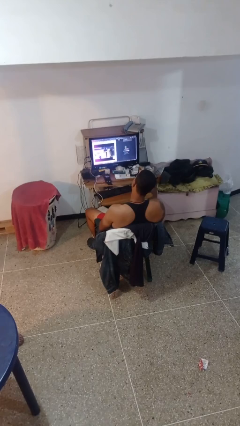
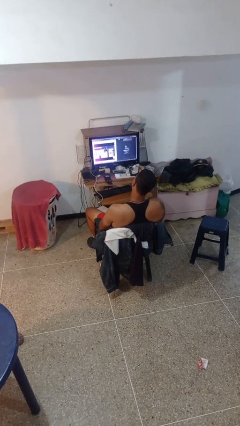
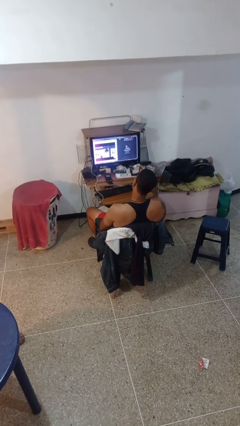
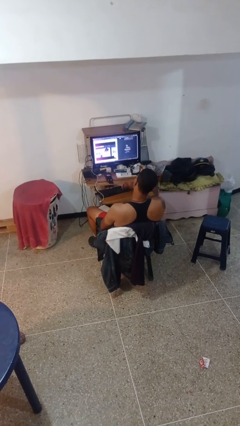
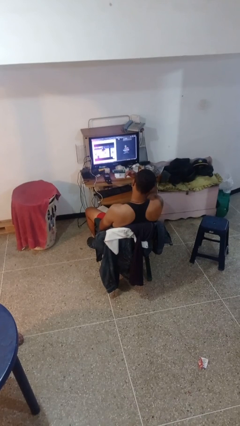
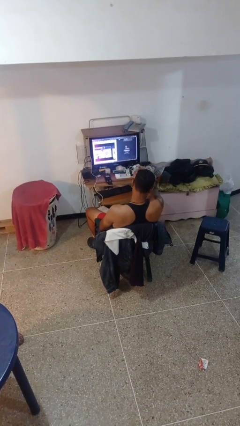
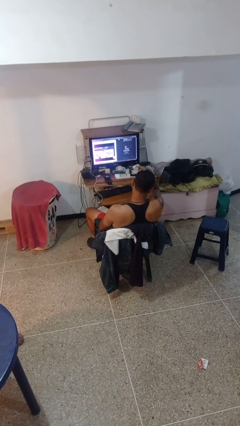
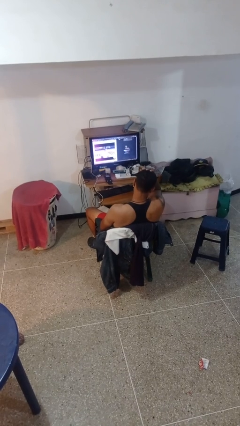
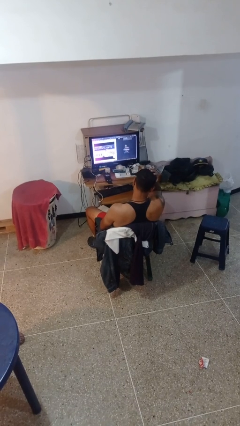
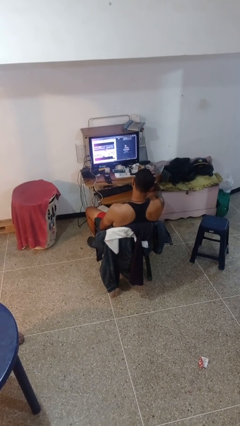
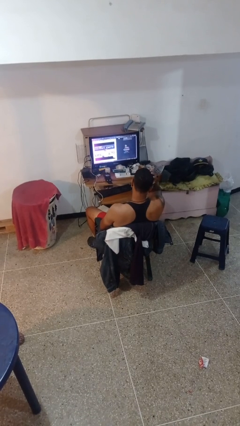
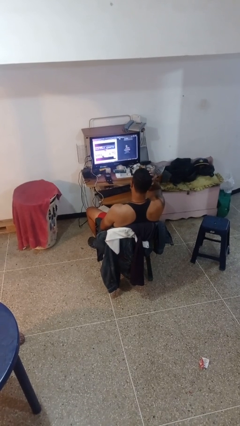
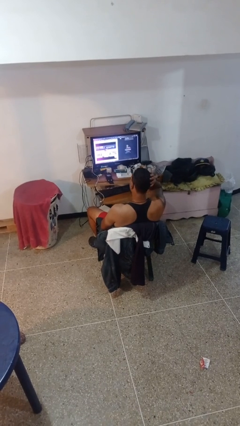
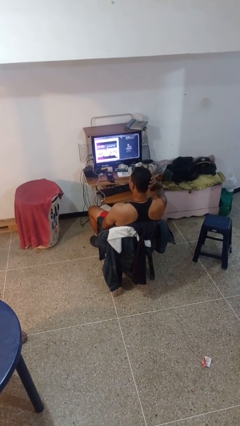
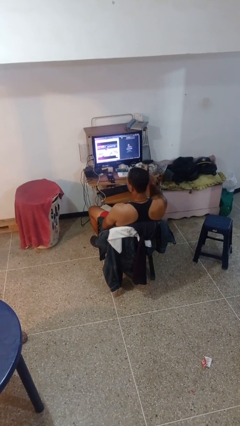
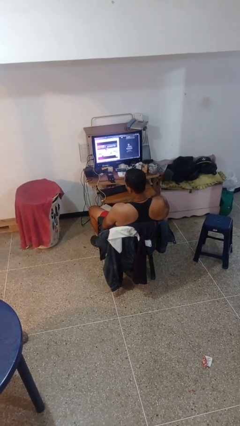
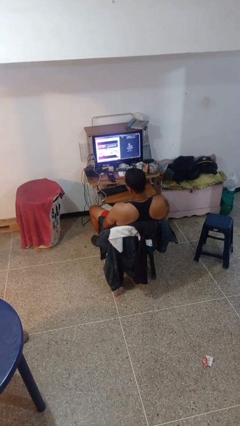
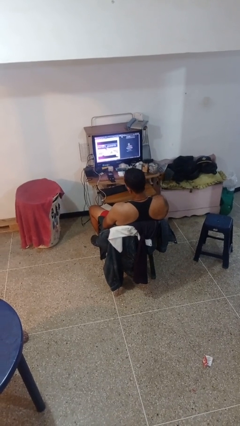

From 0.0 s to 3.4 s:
person pats head

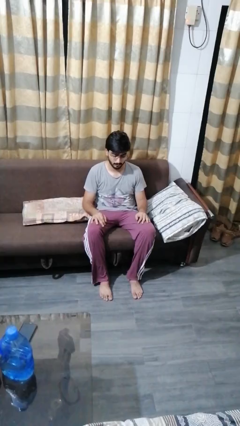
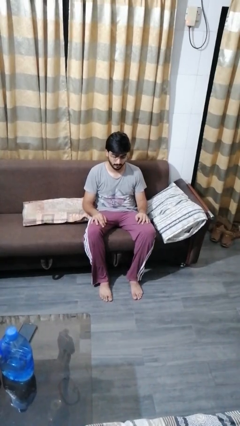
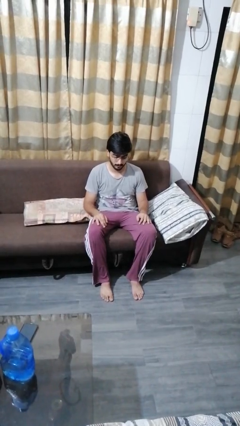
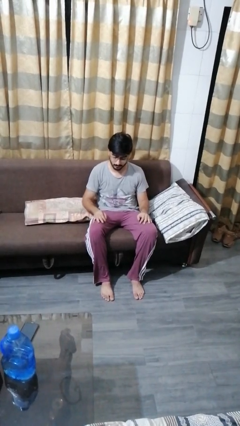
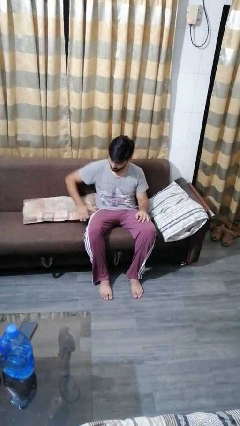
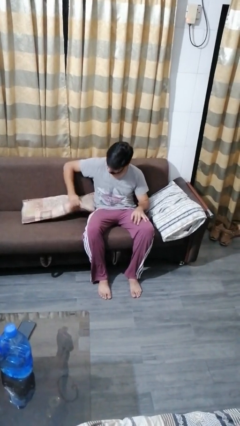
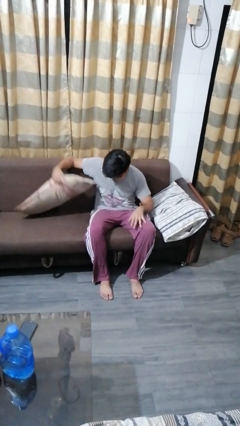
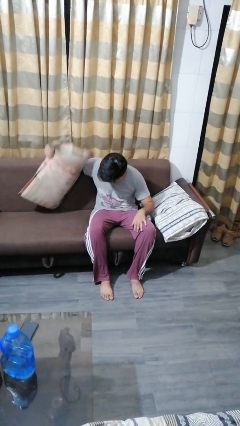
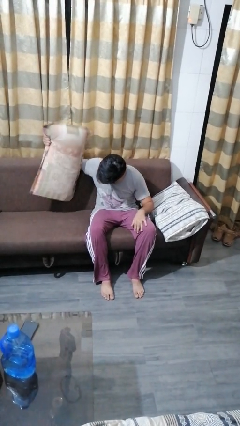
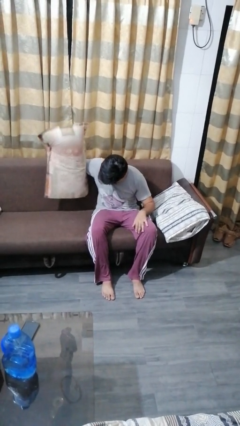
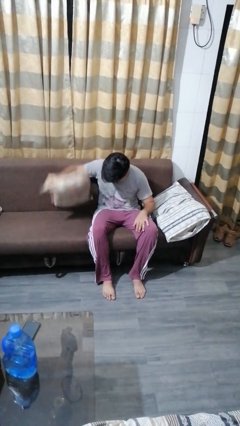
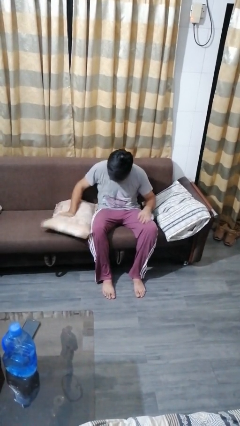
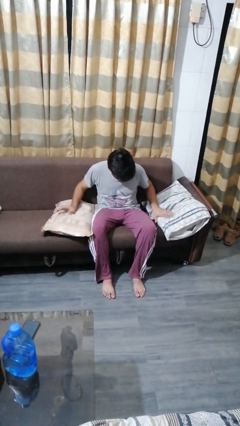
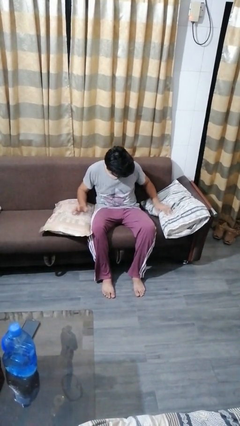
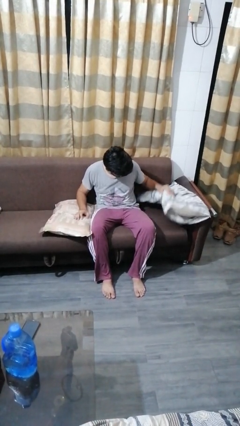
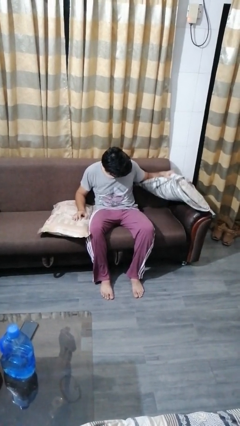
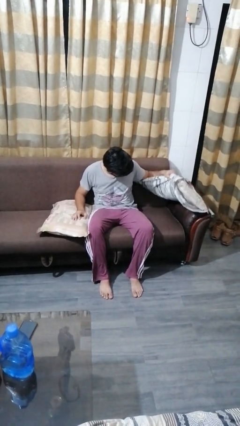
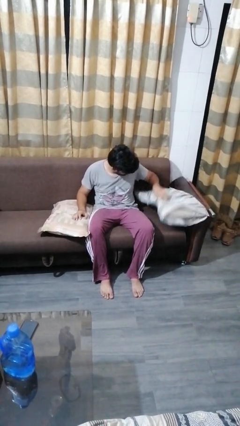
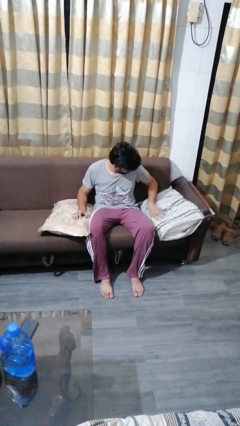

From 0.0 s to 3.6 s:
person searches in couch

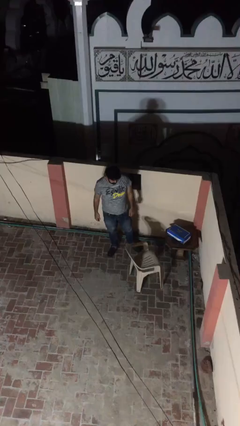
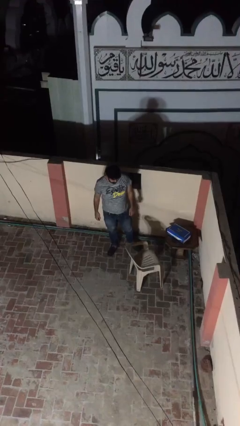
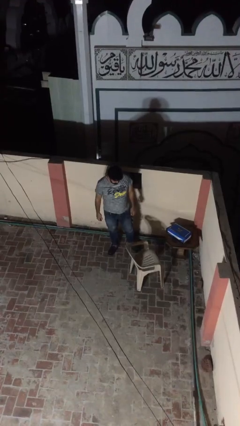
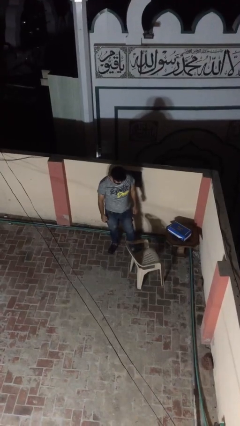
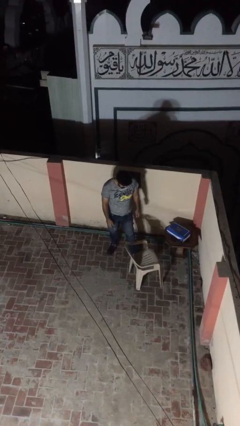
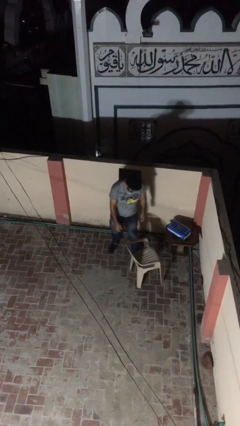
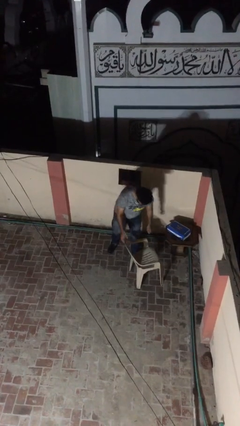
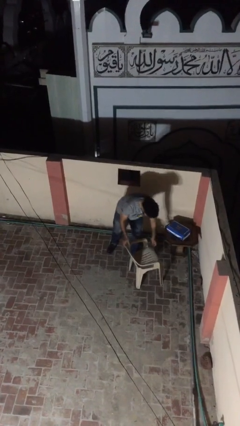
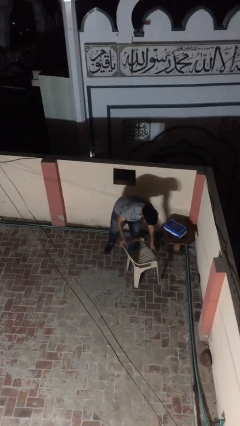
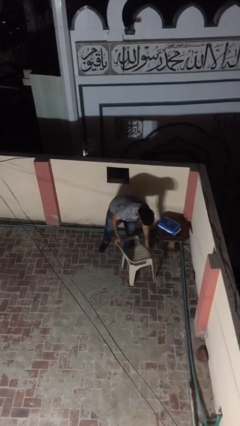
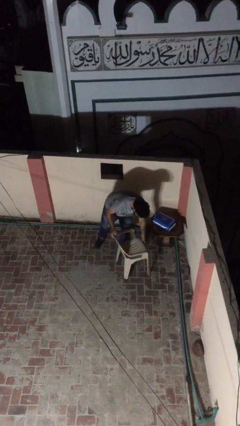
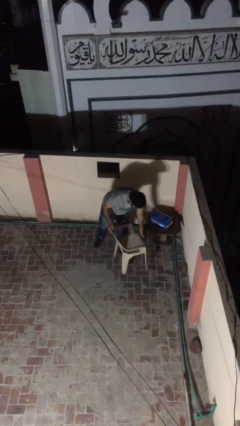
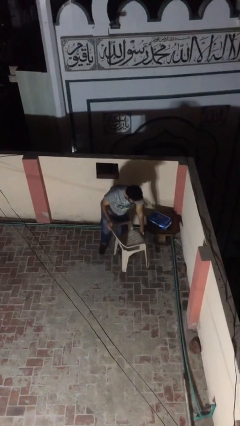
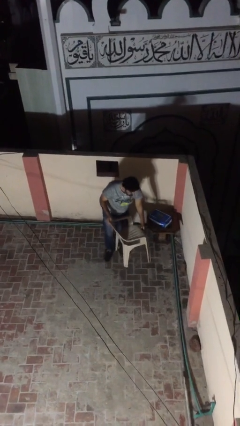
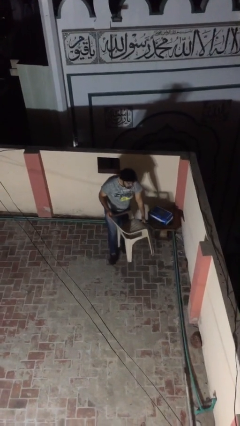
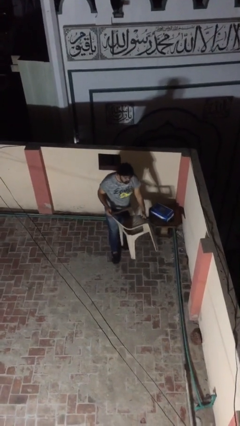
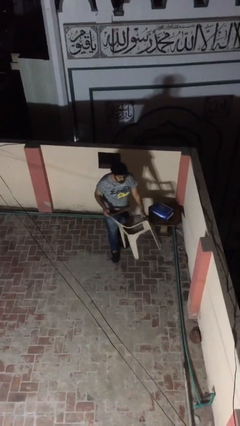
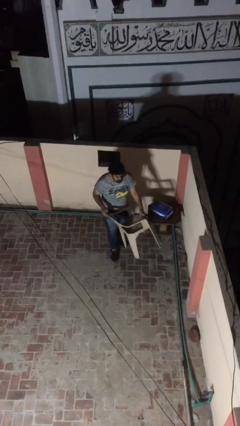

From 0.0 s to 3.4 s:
person picks up object from floor

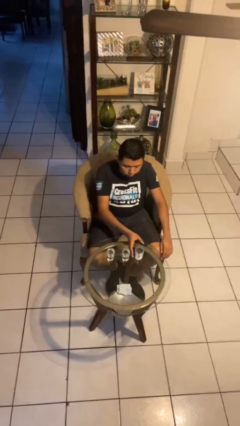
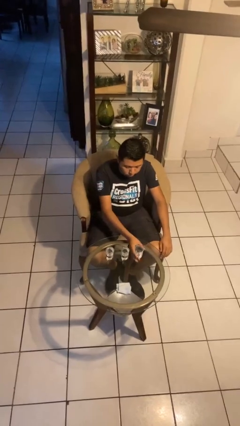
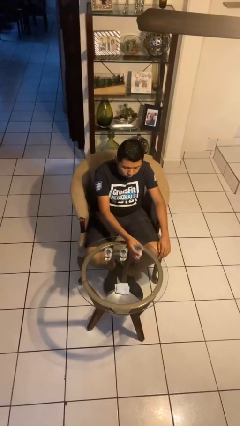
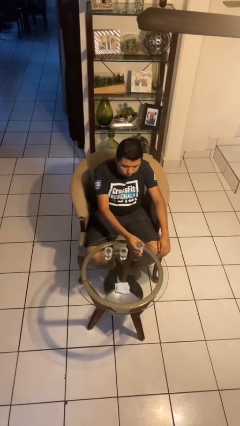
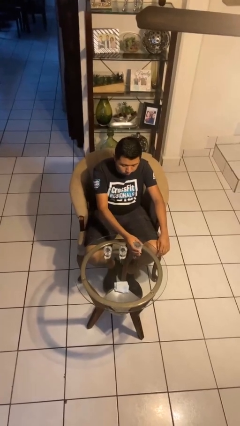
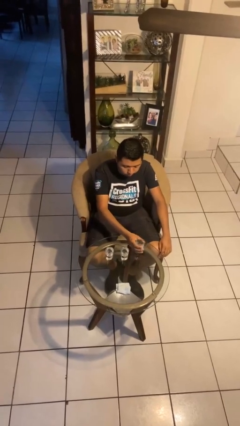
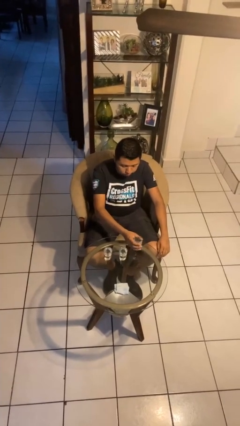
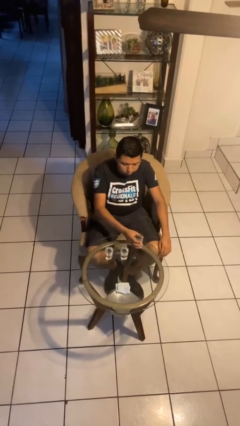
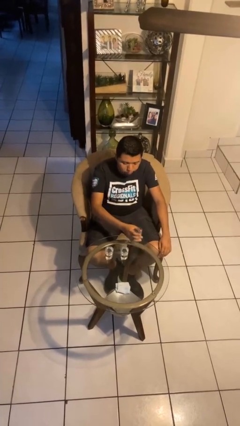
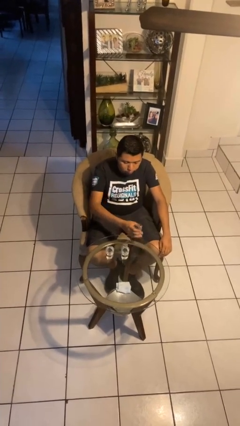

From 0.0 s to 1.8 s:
person picks up object from table

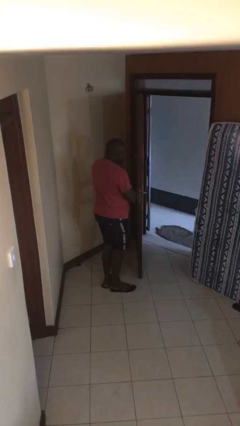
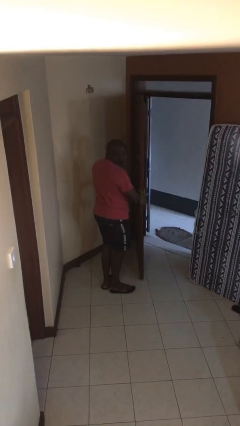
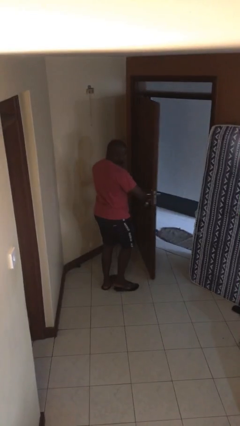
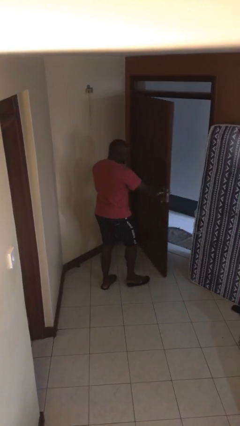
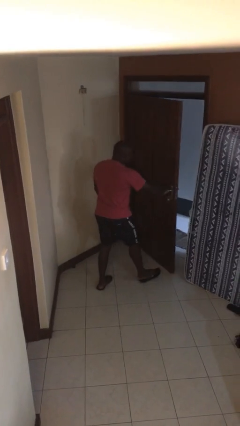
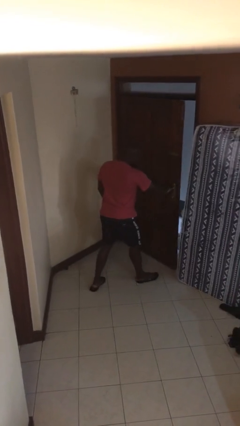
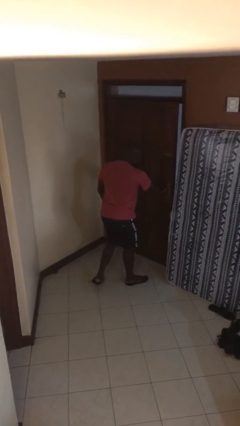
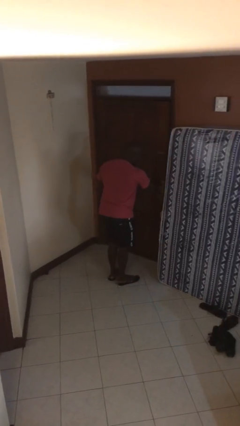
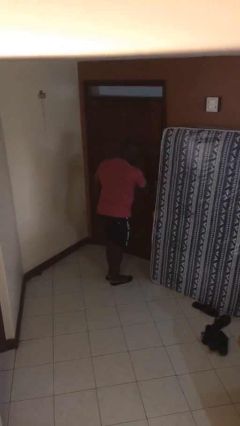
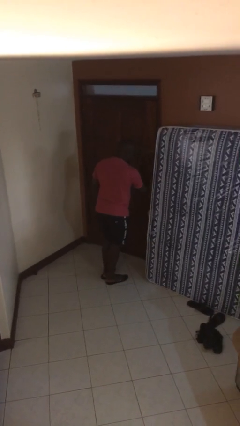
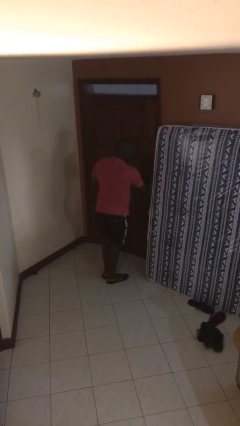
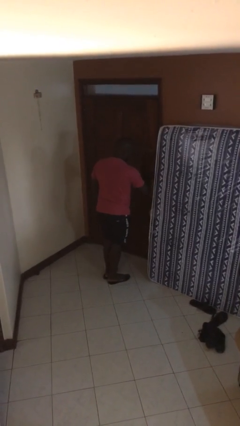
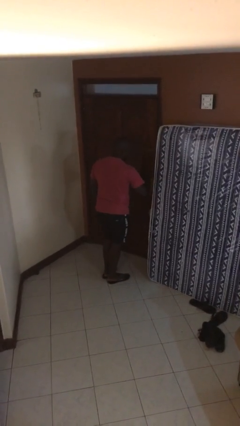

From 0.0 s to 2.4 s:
person closes facility door

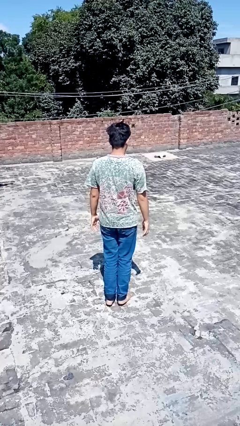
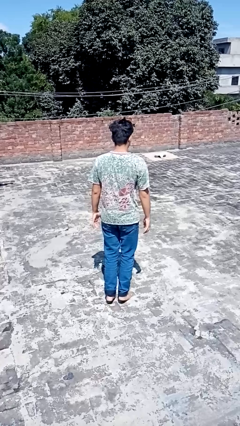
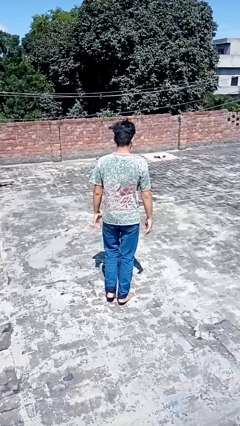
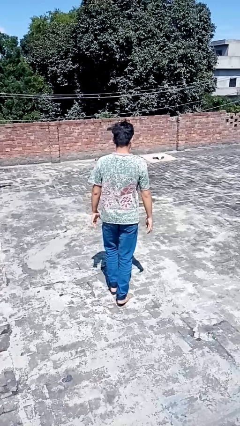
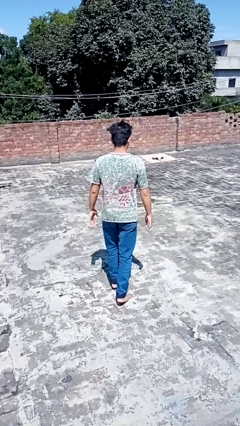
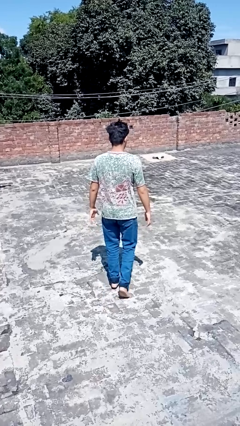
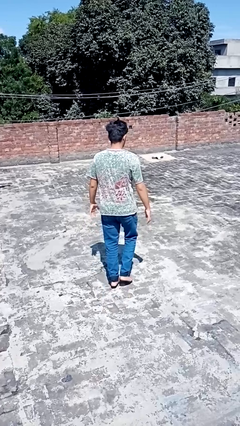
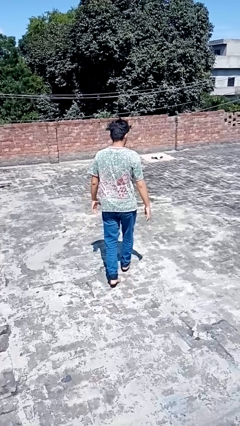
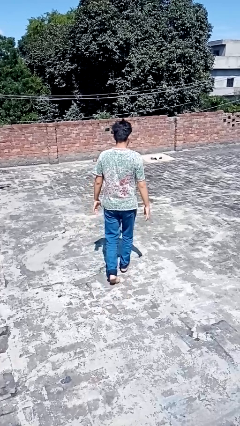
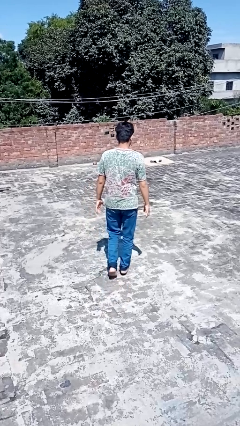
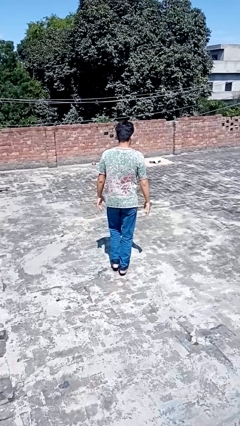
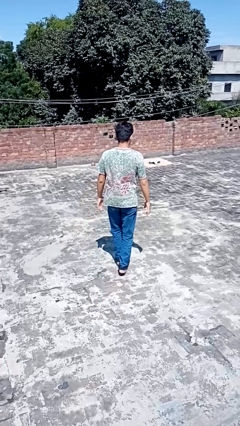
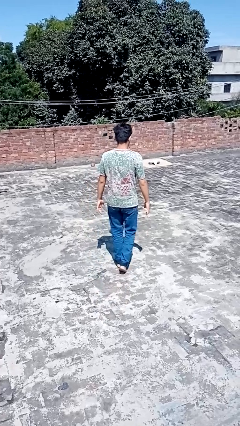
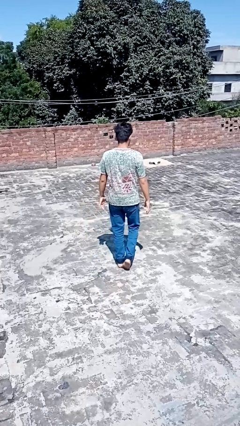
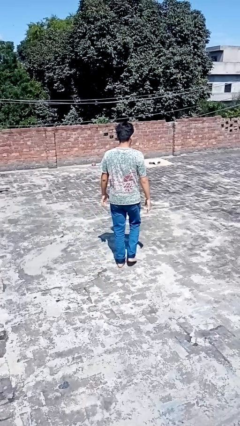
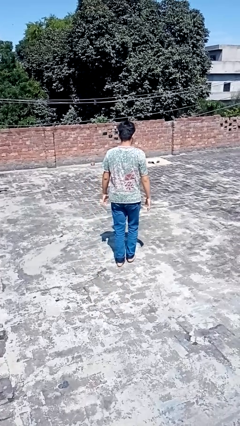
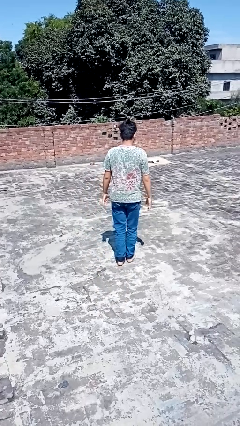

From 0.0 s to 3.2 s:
person walks tiptoe
